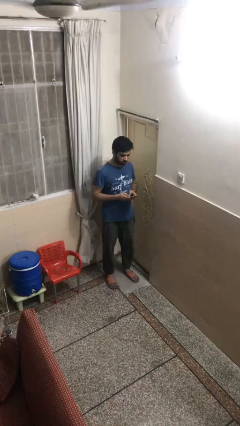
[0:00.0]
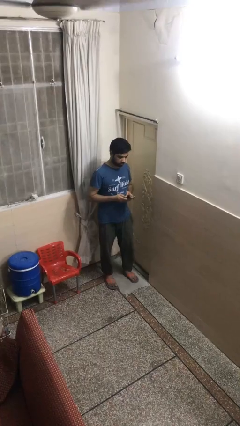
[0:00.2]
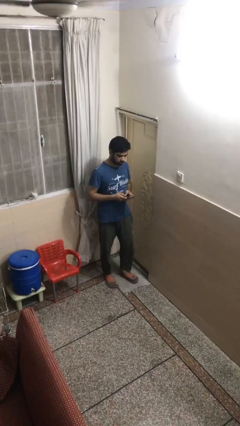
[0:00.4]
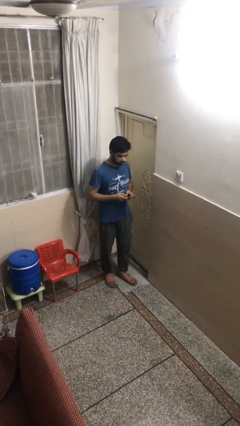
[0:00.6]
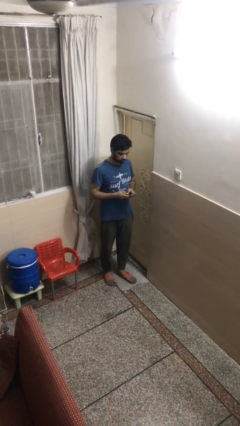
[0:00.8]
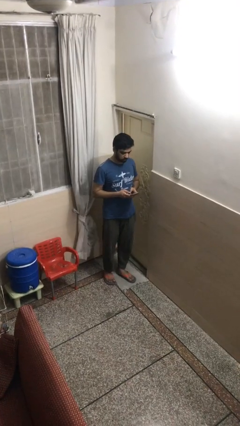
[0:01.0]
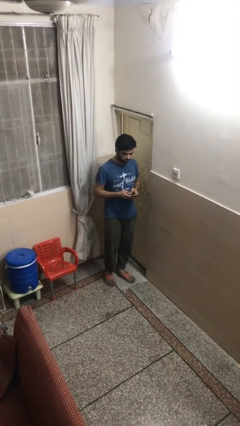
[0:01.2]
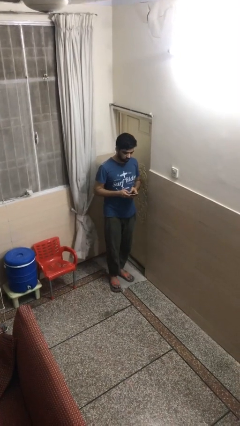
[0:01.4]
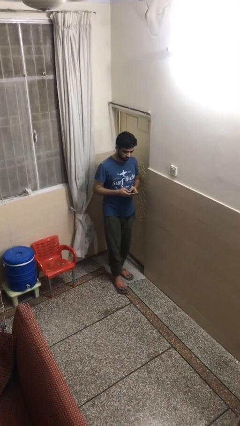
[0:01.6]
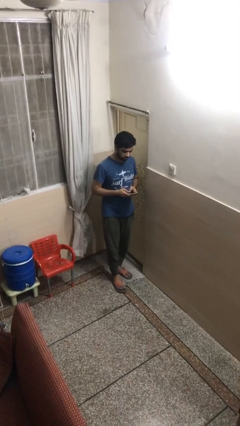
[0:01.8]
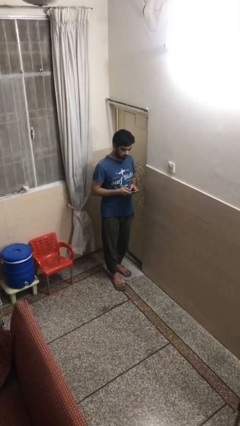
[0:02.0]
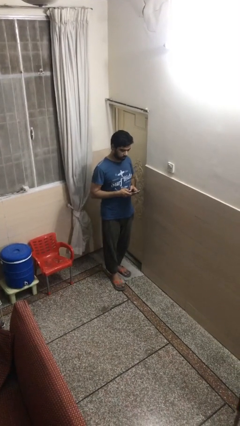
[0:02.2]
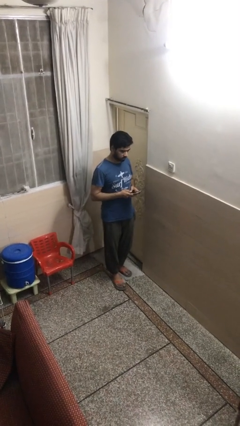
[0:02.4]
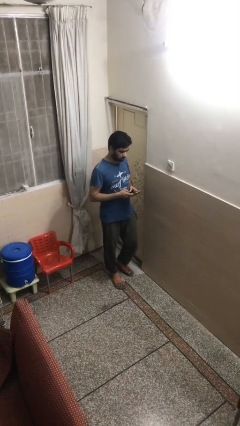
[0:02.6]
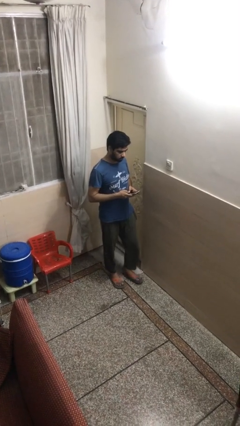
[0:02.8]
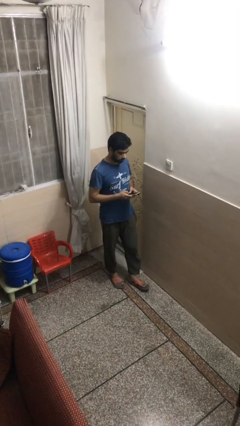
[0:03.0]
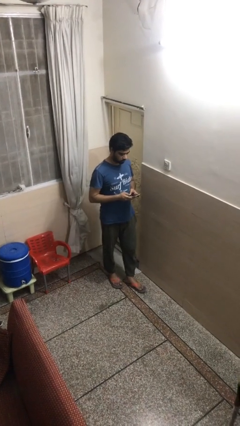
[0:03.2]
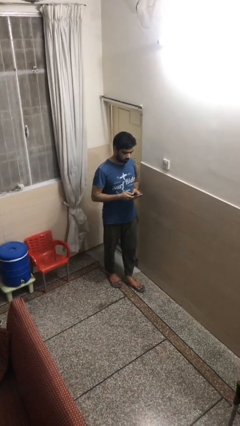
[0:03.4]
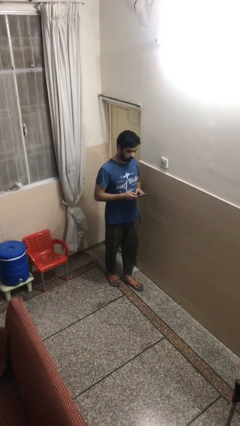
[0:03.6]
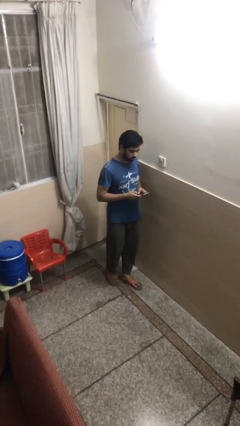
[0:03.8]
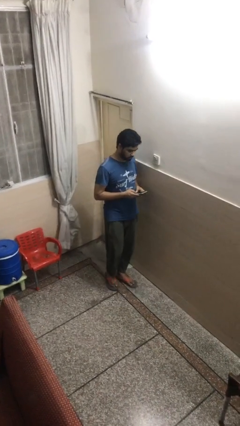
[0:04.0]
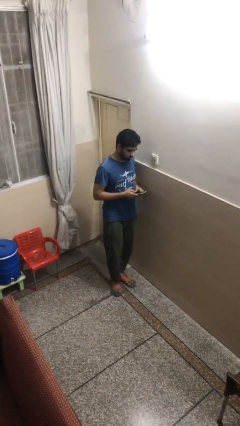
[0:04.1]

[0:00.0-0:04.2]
person texts on phone

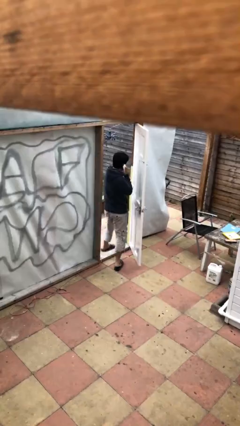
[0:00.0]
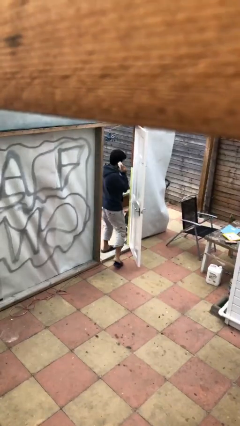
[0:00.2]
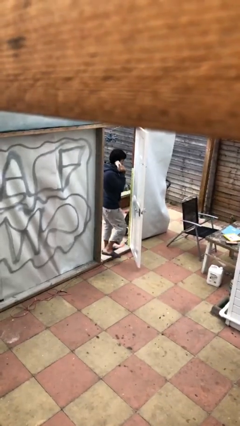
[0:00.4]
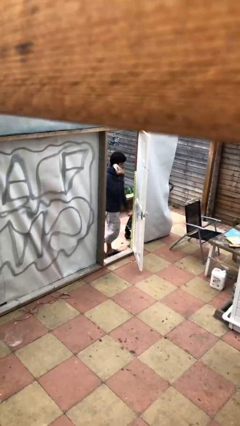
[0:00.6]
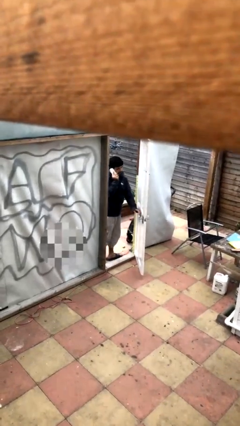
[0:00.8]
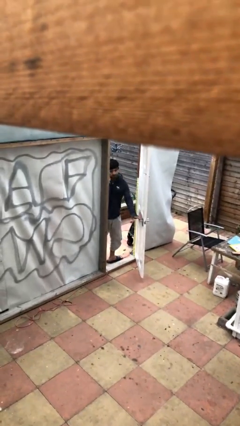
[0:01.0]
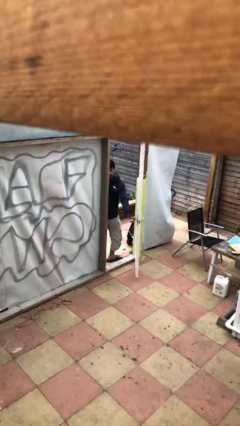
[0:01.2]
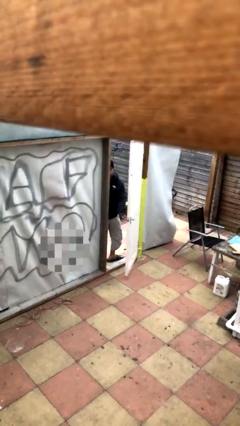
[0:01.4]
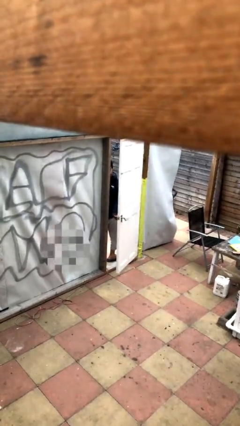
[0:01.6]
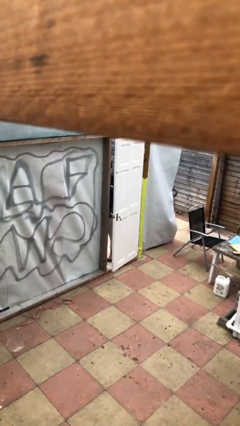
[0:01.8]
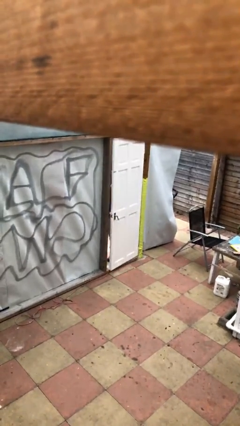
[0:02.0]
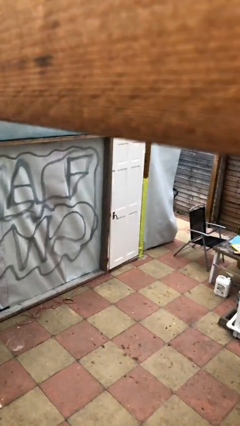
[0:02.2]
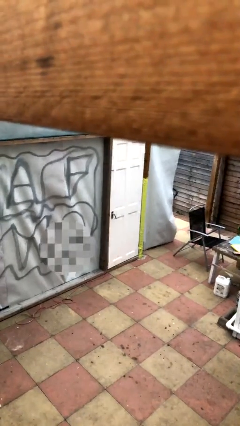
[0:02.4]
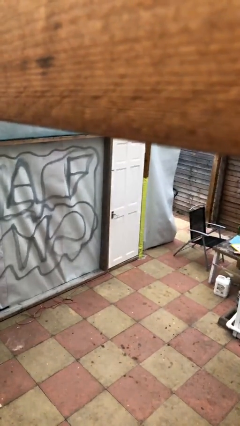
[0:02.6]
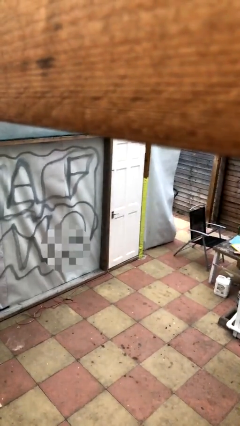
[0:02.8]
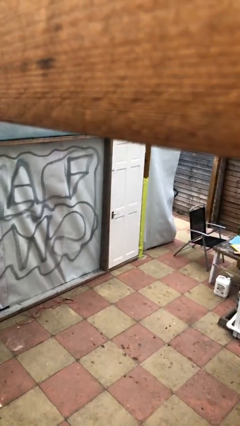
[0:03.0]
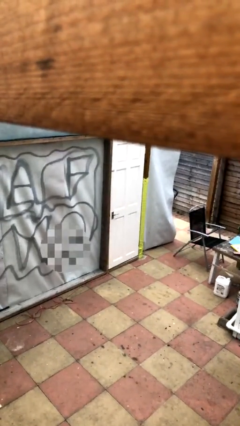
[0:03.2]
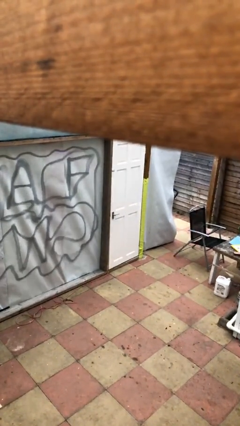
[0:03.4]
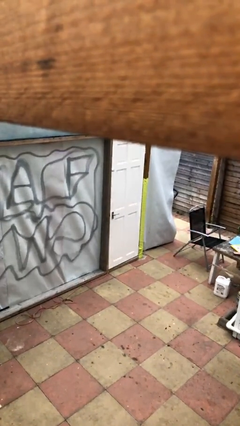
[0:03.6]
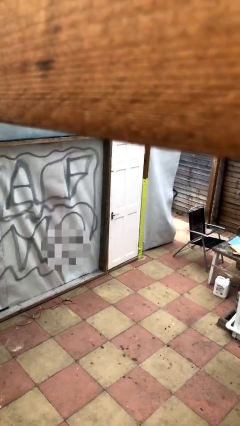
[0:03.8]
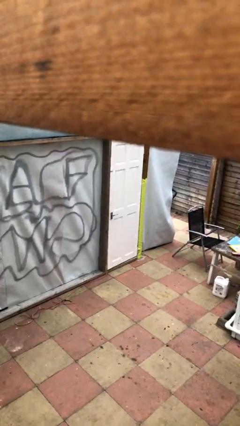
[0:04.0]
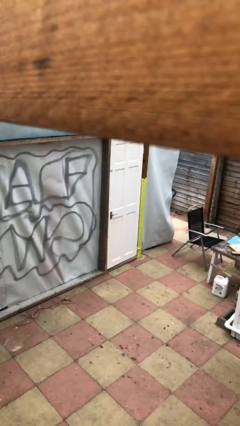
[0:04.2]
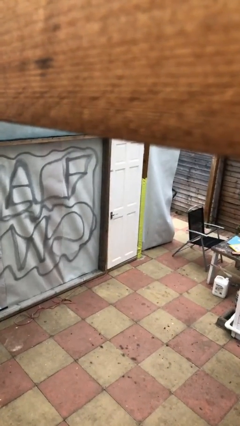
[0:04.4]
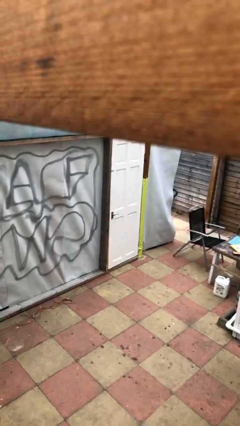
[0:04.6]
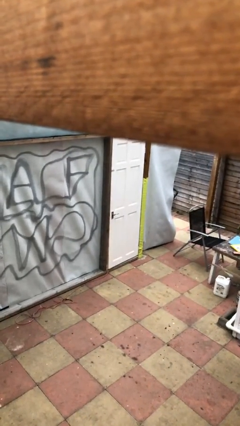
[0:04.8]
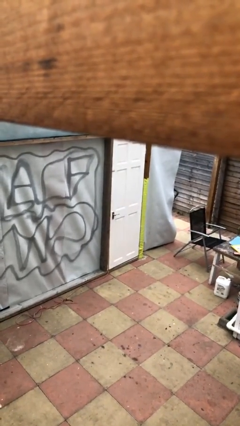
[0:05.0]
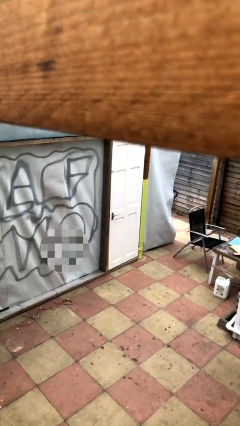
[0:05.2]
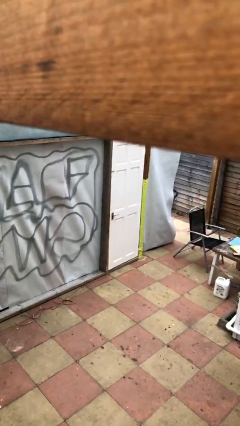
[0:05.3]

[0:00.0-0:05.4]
person closes facility door

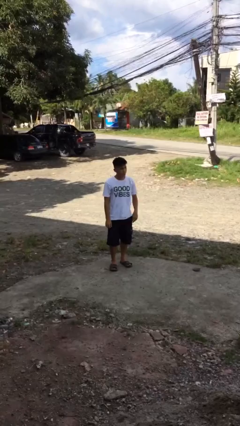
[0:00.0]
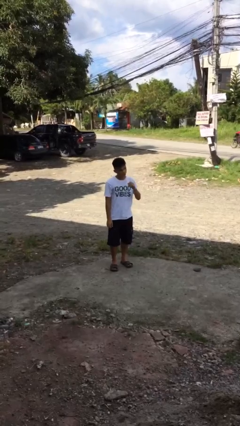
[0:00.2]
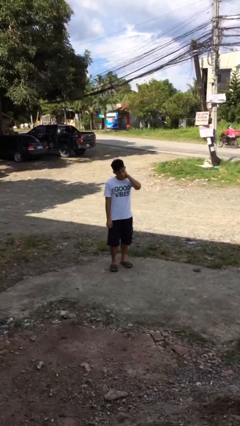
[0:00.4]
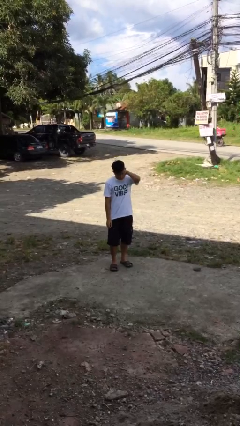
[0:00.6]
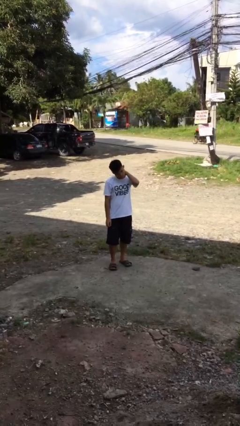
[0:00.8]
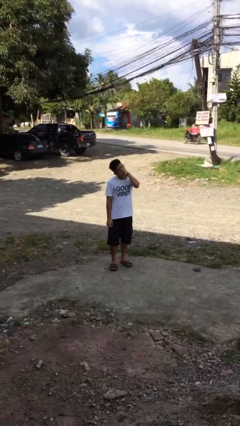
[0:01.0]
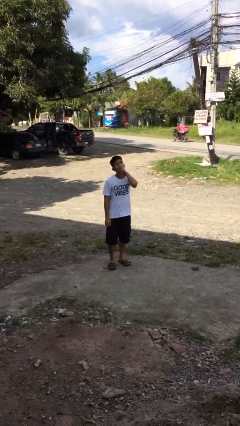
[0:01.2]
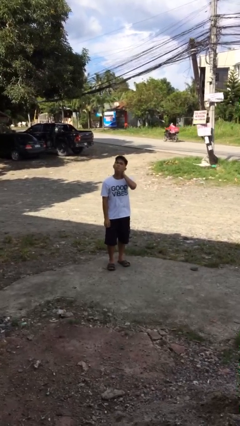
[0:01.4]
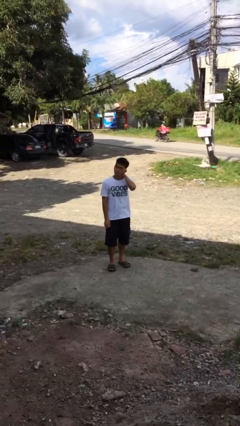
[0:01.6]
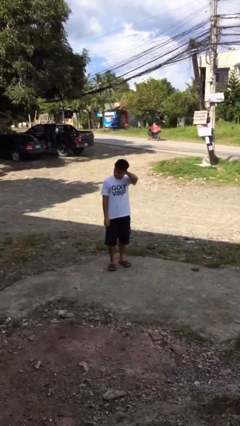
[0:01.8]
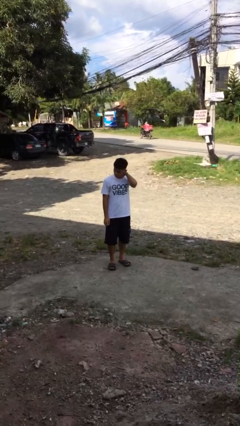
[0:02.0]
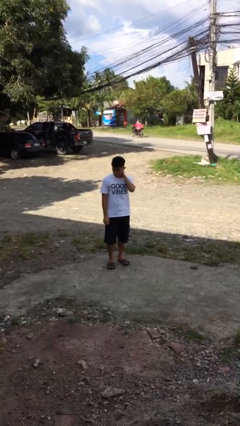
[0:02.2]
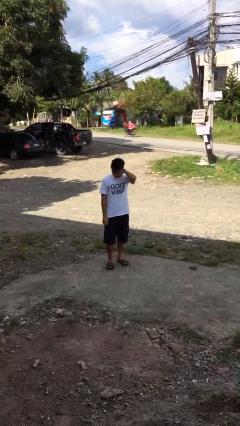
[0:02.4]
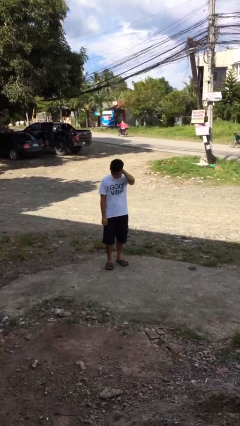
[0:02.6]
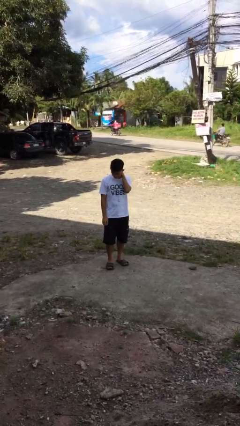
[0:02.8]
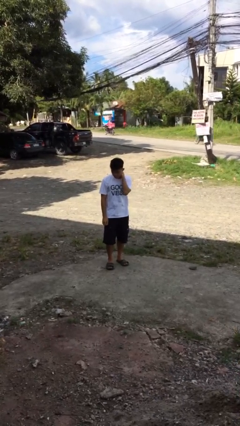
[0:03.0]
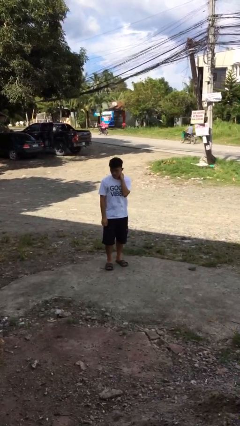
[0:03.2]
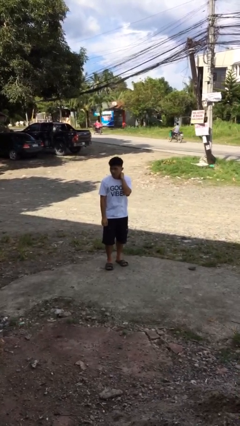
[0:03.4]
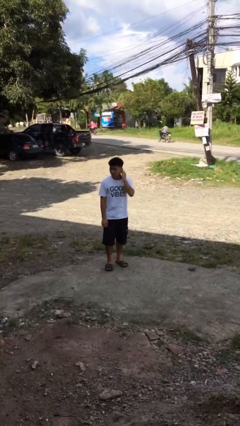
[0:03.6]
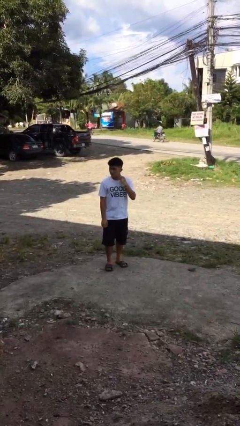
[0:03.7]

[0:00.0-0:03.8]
person rubs neck

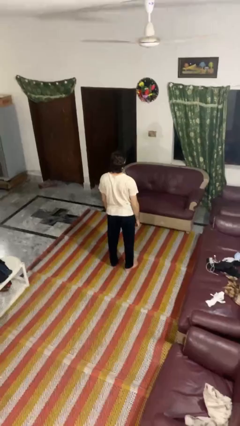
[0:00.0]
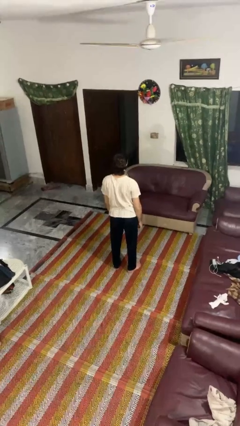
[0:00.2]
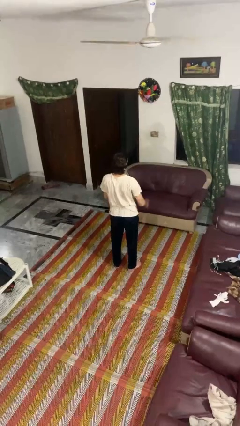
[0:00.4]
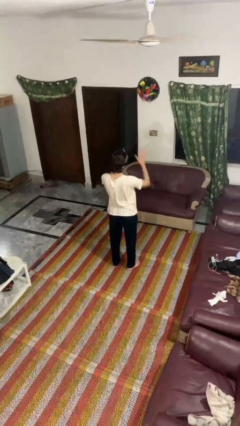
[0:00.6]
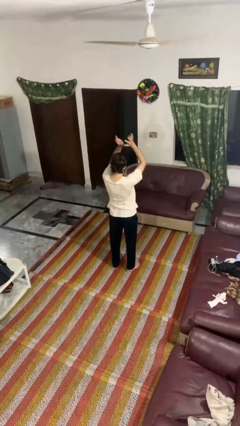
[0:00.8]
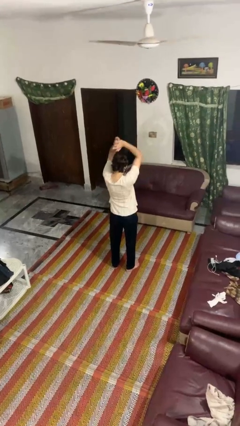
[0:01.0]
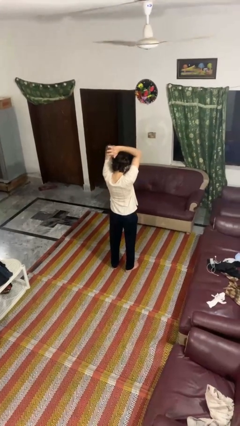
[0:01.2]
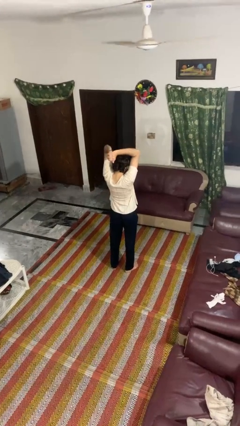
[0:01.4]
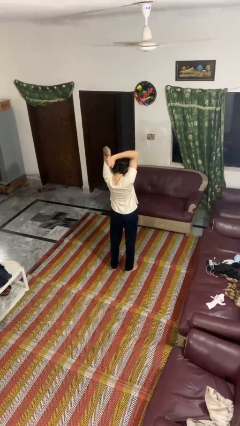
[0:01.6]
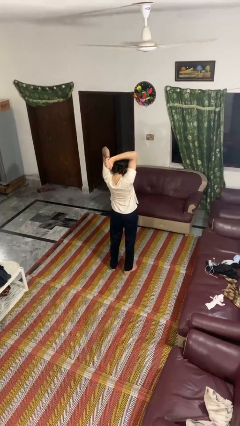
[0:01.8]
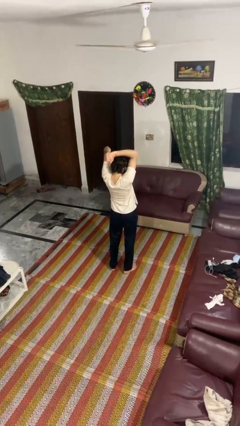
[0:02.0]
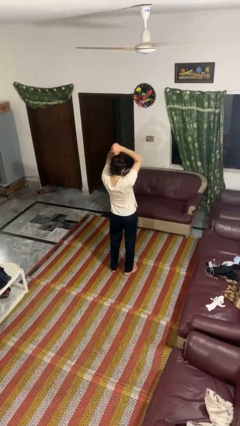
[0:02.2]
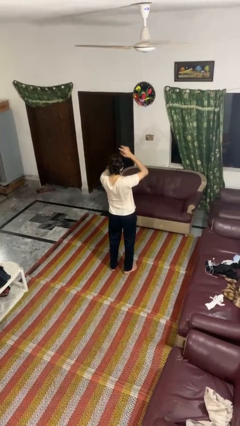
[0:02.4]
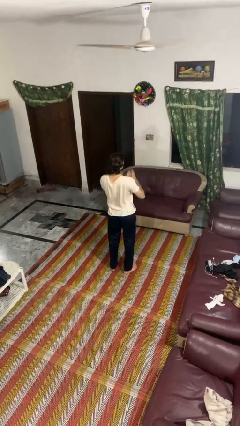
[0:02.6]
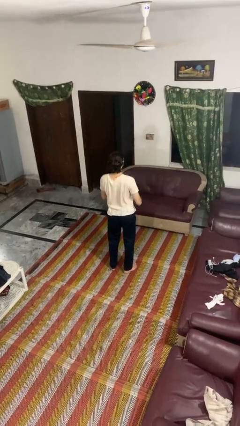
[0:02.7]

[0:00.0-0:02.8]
person stretches arms over head

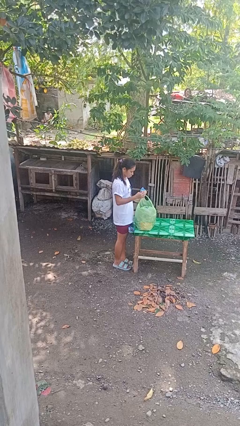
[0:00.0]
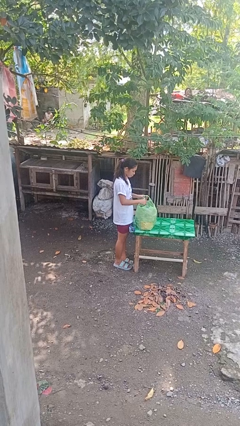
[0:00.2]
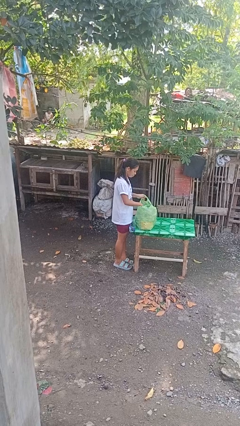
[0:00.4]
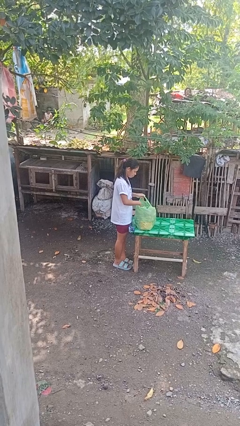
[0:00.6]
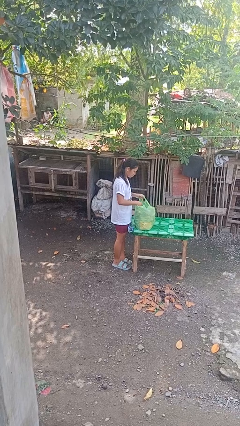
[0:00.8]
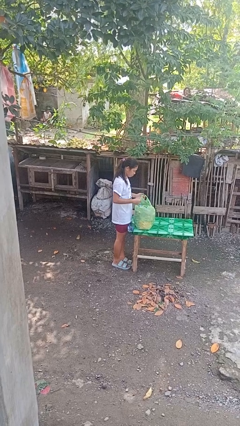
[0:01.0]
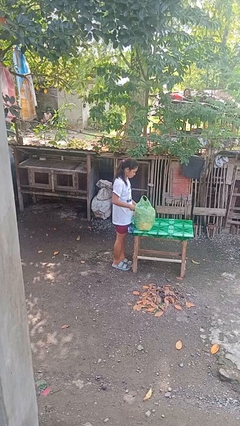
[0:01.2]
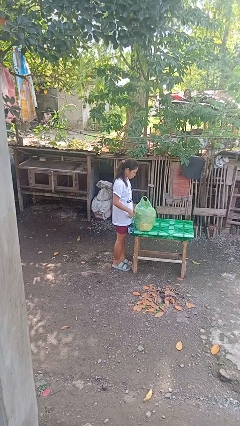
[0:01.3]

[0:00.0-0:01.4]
person puts object into bag
